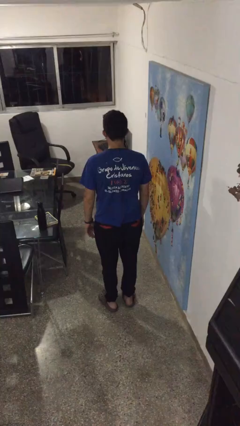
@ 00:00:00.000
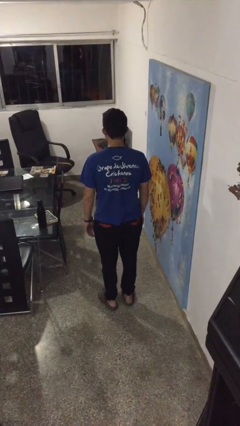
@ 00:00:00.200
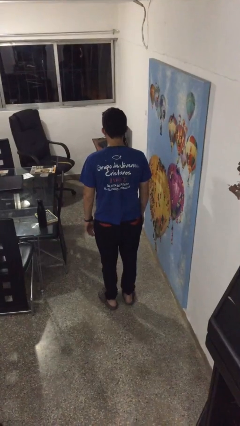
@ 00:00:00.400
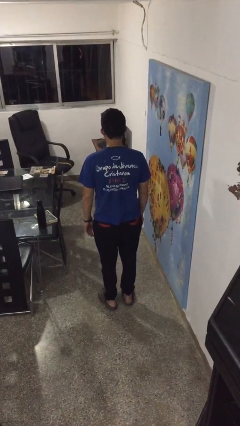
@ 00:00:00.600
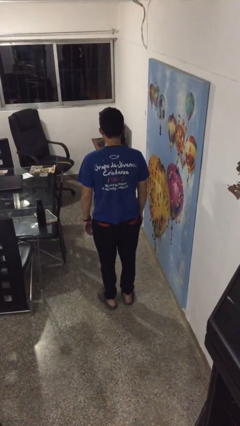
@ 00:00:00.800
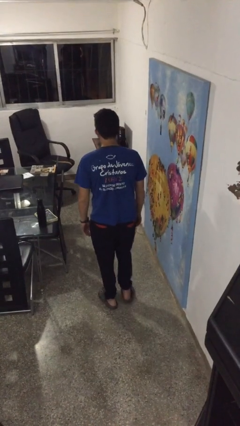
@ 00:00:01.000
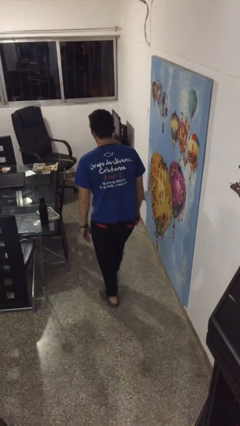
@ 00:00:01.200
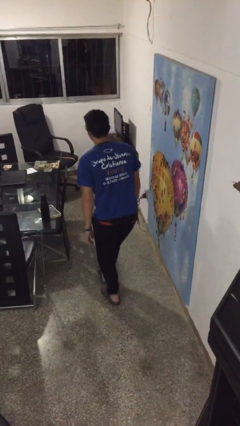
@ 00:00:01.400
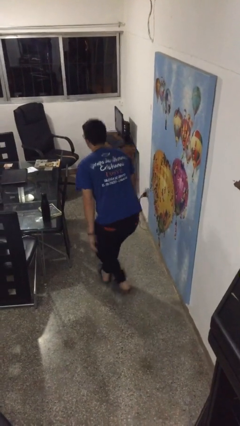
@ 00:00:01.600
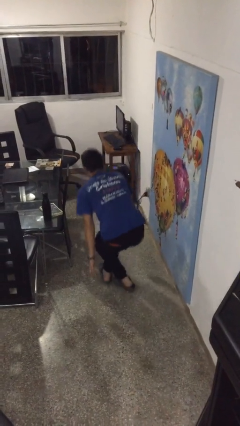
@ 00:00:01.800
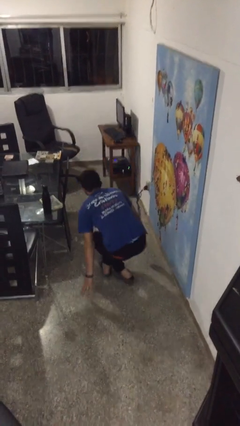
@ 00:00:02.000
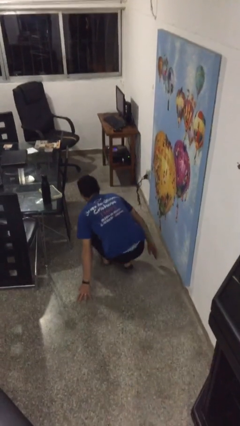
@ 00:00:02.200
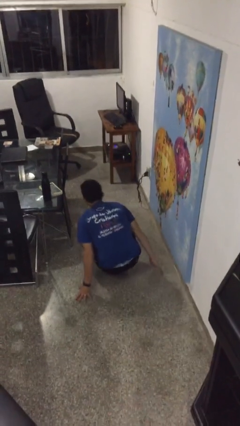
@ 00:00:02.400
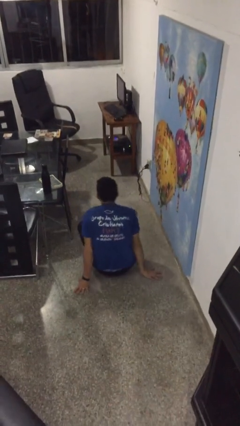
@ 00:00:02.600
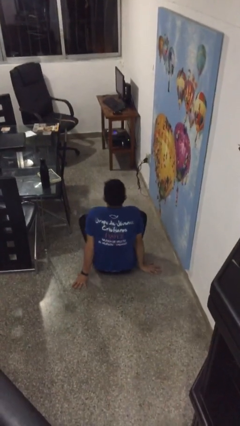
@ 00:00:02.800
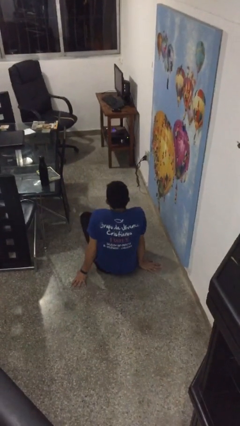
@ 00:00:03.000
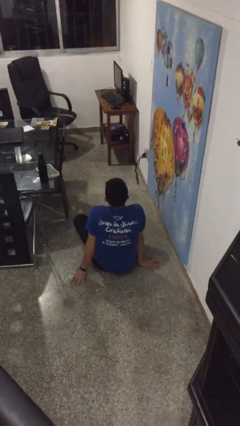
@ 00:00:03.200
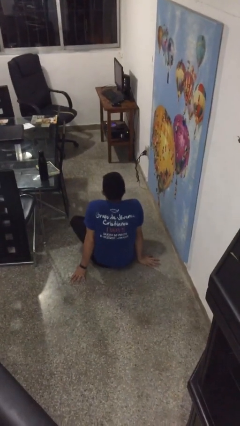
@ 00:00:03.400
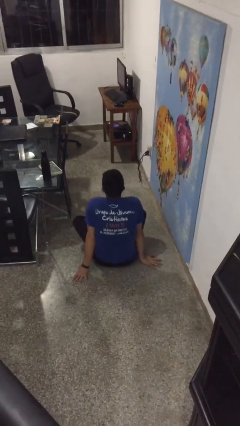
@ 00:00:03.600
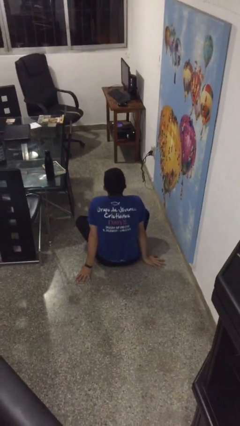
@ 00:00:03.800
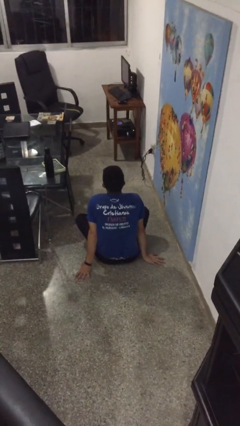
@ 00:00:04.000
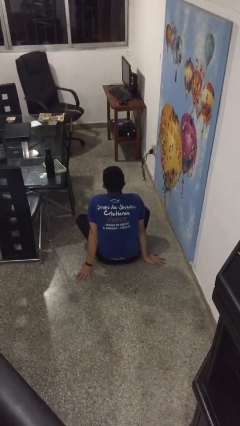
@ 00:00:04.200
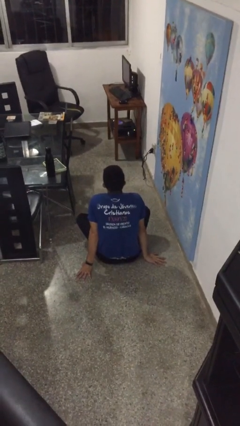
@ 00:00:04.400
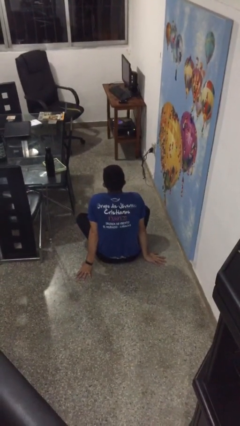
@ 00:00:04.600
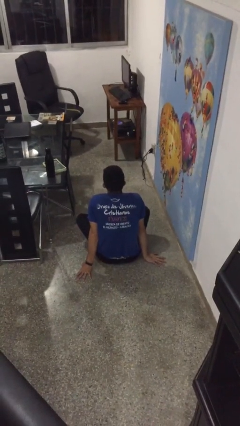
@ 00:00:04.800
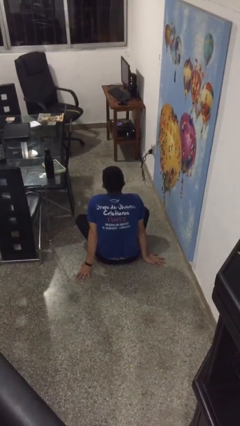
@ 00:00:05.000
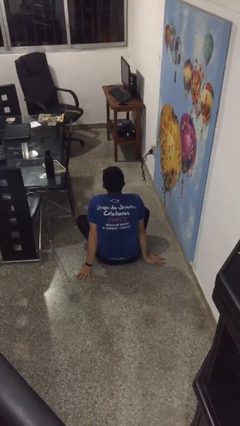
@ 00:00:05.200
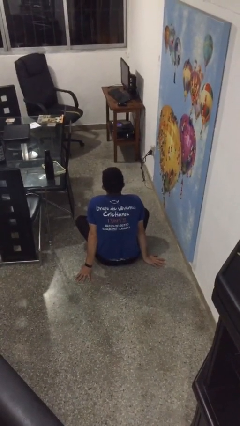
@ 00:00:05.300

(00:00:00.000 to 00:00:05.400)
person sits crisscross

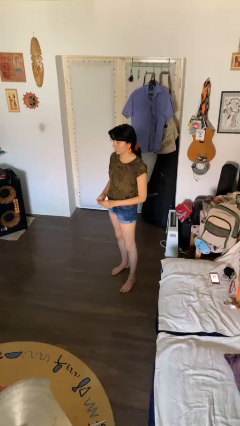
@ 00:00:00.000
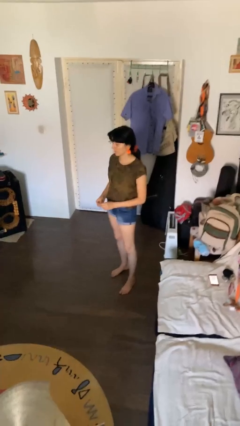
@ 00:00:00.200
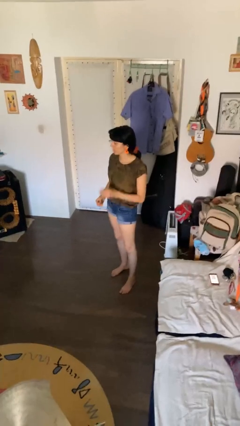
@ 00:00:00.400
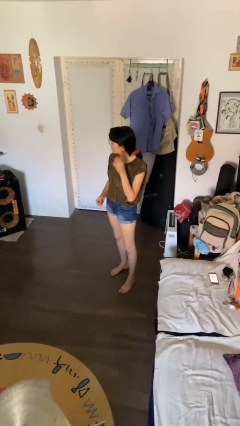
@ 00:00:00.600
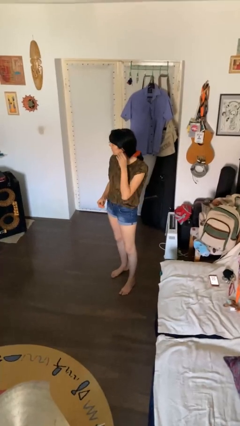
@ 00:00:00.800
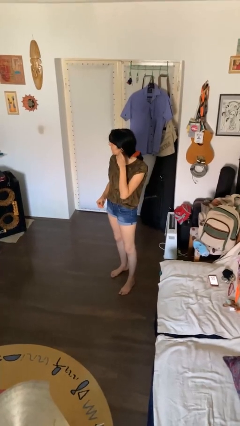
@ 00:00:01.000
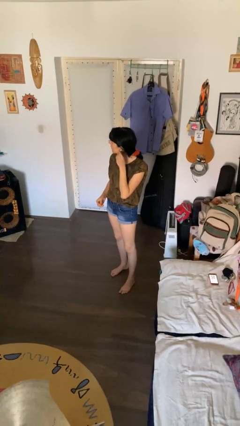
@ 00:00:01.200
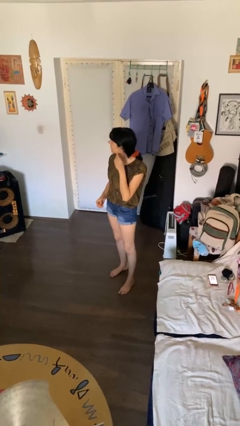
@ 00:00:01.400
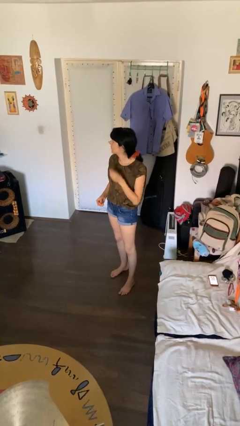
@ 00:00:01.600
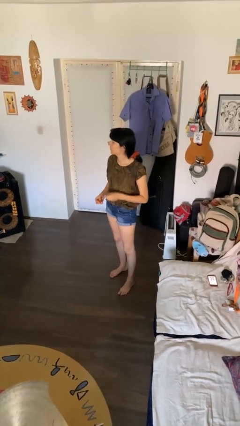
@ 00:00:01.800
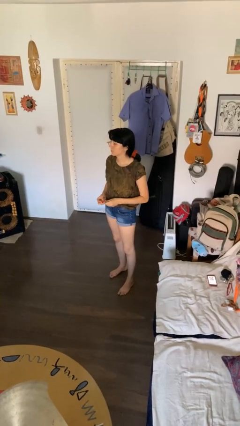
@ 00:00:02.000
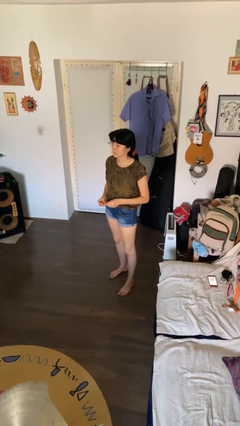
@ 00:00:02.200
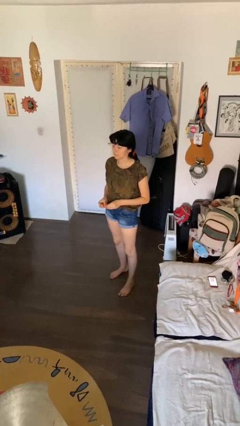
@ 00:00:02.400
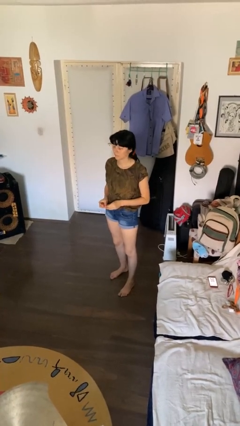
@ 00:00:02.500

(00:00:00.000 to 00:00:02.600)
person takes off earrings

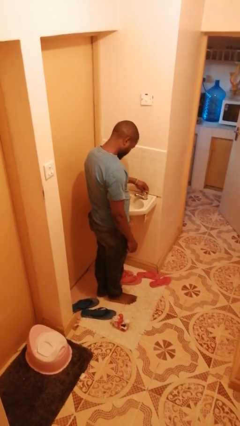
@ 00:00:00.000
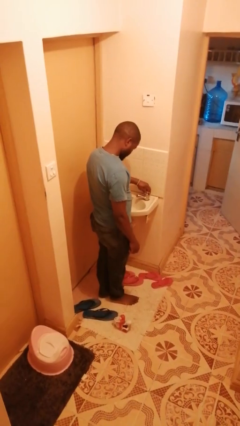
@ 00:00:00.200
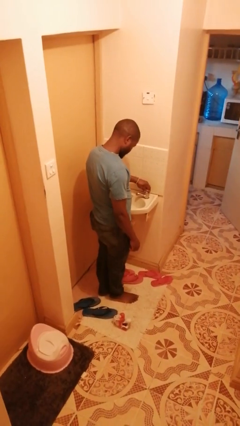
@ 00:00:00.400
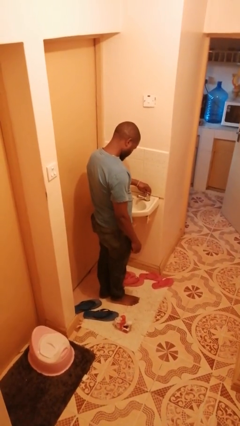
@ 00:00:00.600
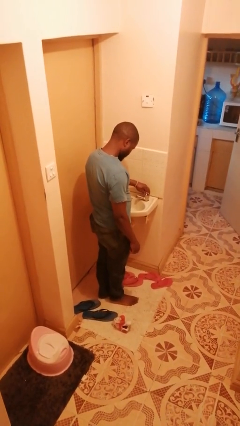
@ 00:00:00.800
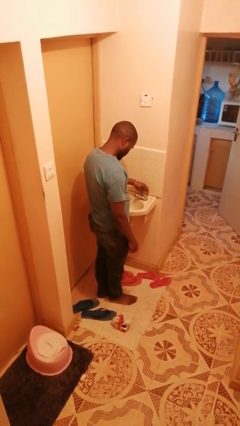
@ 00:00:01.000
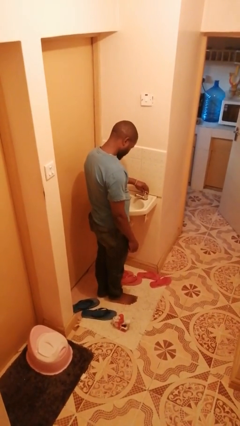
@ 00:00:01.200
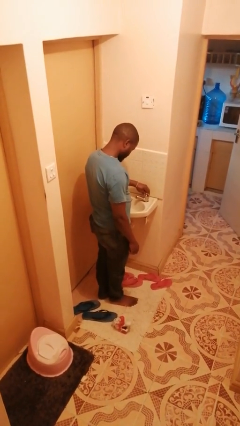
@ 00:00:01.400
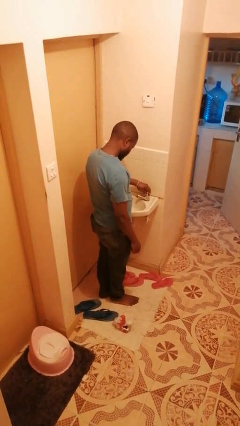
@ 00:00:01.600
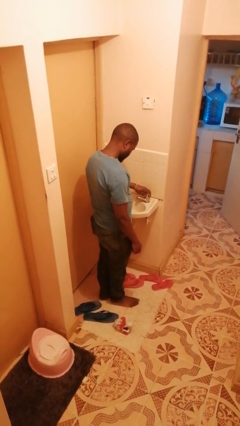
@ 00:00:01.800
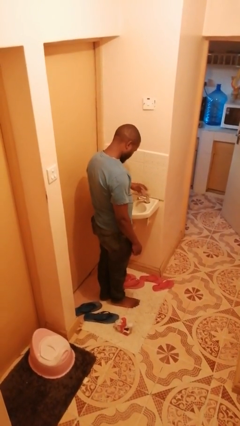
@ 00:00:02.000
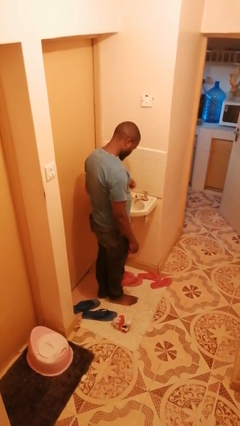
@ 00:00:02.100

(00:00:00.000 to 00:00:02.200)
person turns off faucet

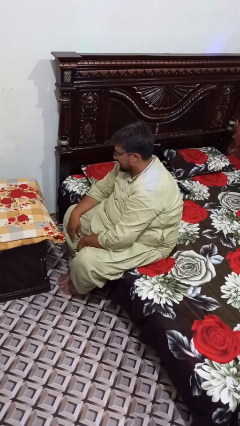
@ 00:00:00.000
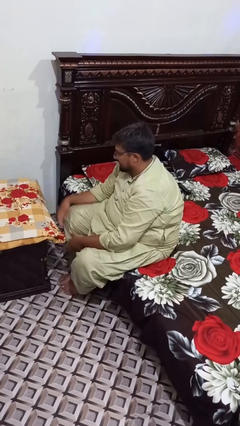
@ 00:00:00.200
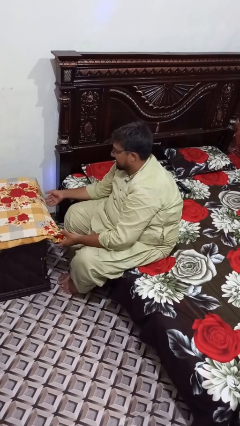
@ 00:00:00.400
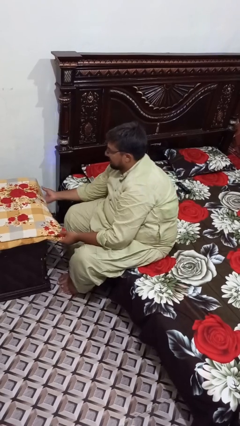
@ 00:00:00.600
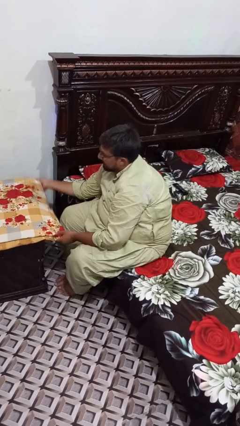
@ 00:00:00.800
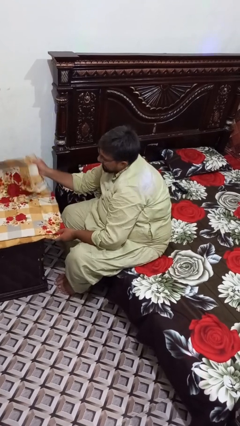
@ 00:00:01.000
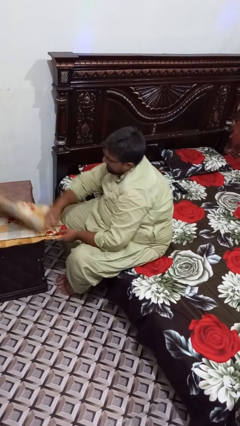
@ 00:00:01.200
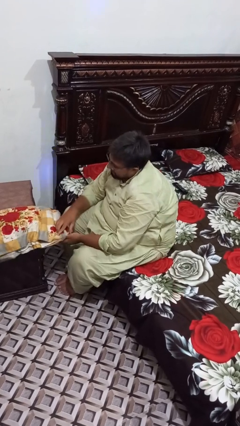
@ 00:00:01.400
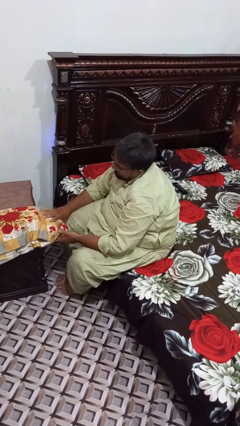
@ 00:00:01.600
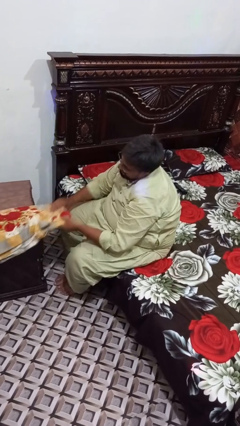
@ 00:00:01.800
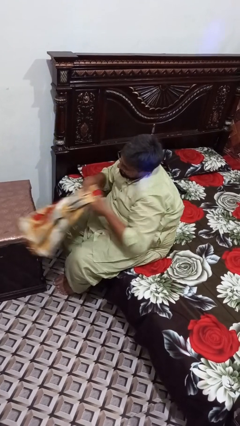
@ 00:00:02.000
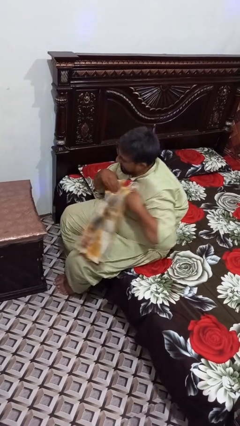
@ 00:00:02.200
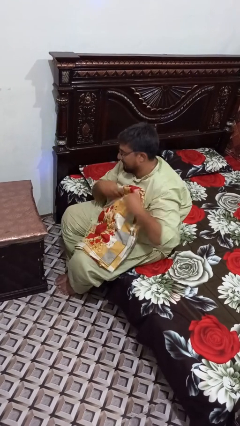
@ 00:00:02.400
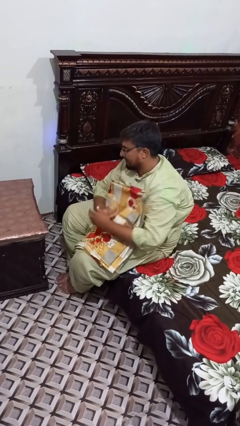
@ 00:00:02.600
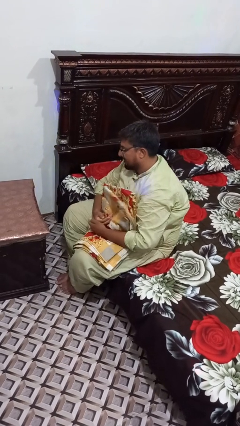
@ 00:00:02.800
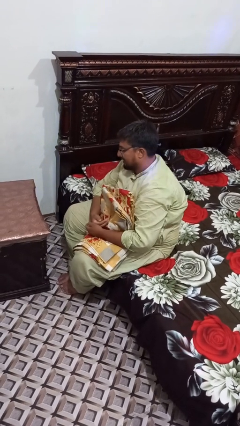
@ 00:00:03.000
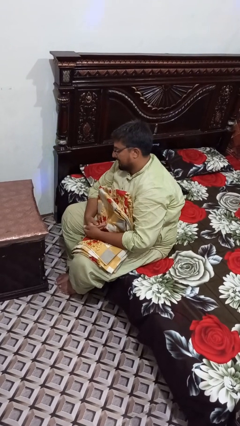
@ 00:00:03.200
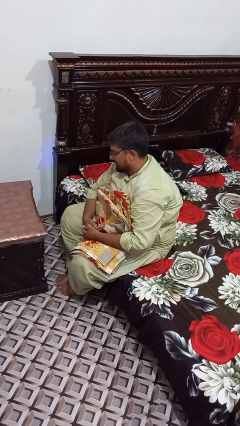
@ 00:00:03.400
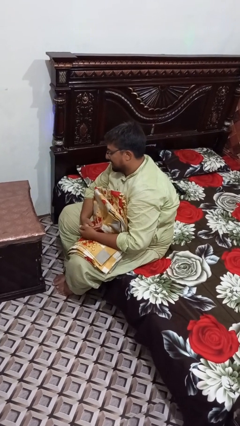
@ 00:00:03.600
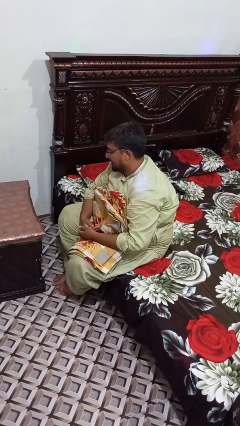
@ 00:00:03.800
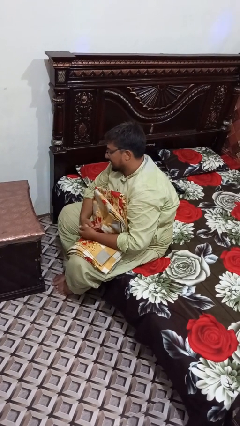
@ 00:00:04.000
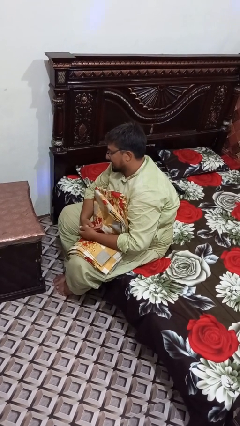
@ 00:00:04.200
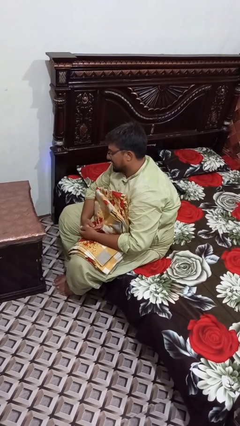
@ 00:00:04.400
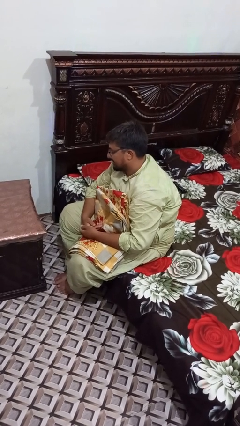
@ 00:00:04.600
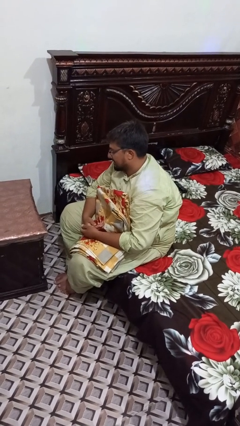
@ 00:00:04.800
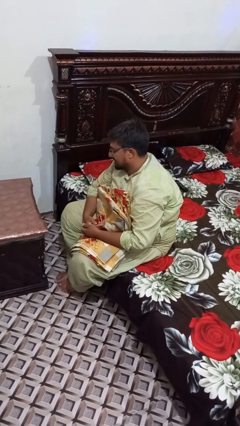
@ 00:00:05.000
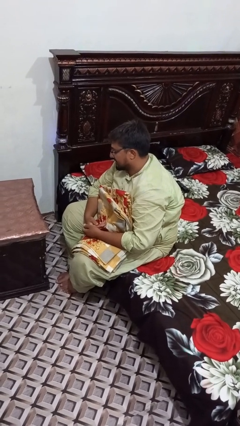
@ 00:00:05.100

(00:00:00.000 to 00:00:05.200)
person folds tablecloth

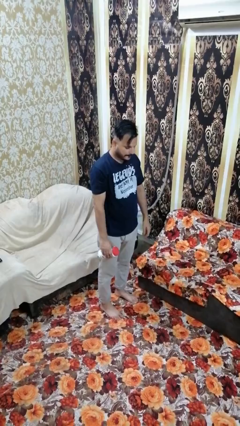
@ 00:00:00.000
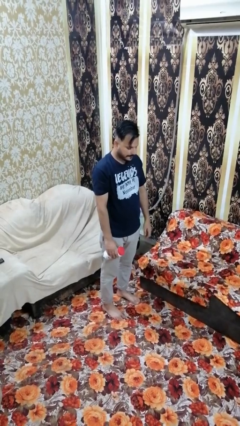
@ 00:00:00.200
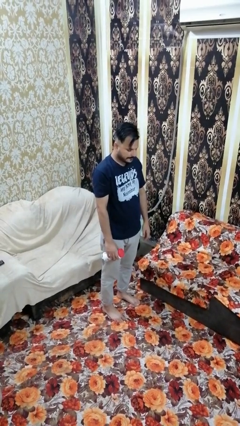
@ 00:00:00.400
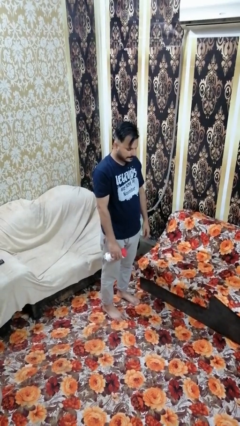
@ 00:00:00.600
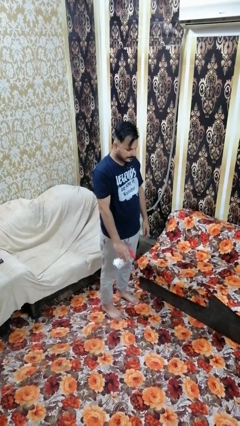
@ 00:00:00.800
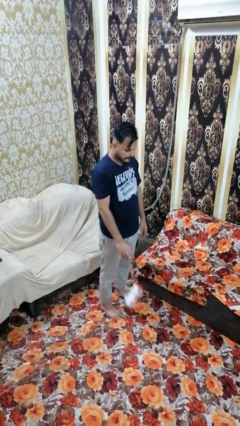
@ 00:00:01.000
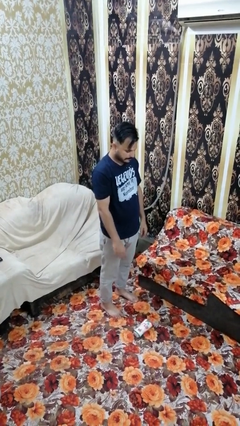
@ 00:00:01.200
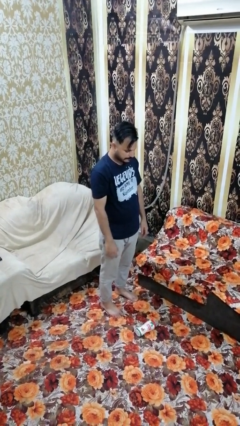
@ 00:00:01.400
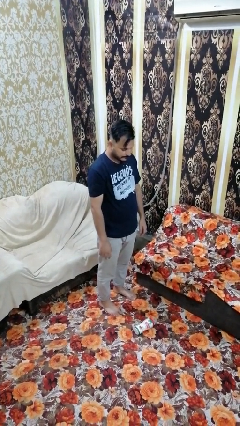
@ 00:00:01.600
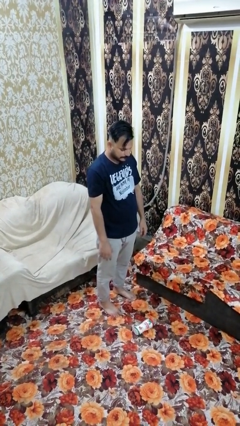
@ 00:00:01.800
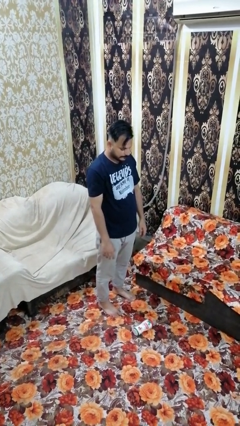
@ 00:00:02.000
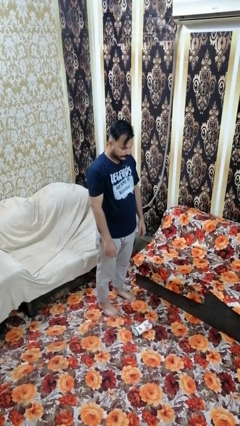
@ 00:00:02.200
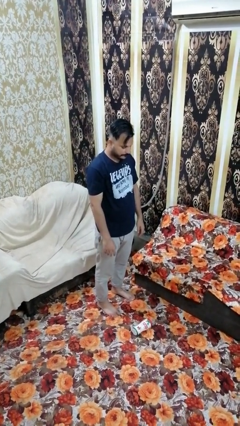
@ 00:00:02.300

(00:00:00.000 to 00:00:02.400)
person drops object
